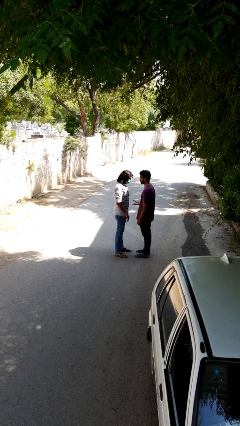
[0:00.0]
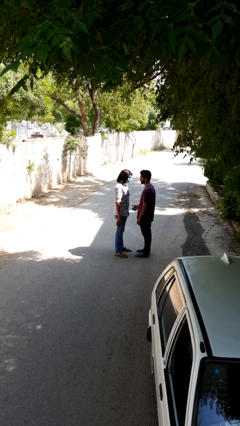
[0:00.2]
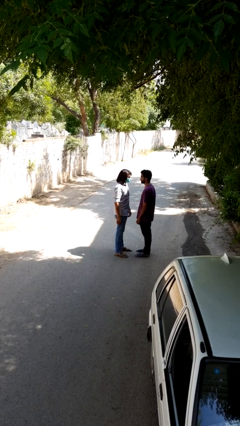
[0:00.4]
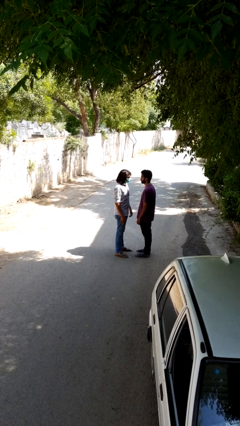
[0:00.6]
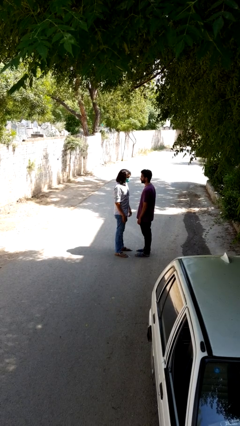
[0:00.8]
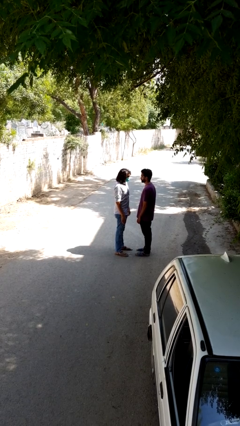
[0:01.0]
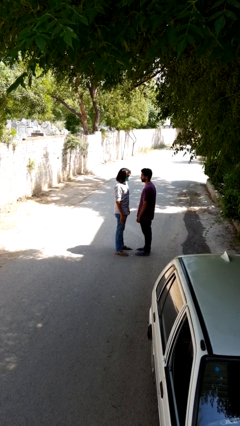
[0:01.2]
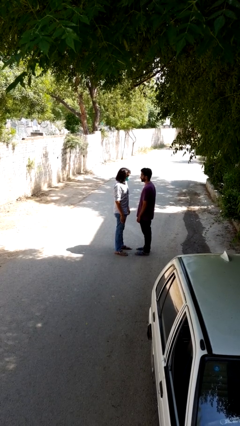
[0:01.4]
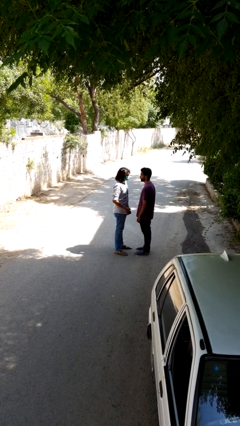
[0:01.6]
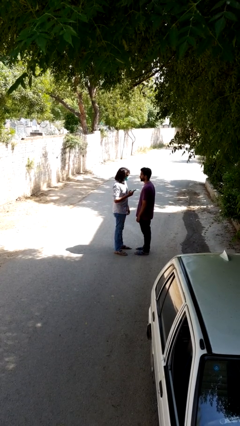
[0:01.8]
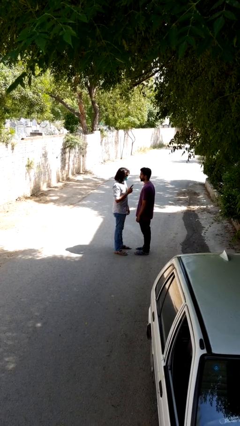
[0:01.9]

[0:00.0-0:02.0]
person highfives hand

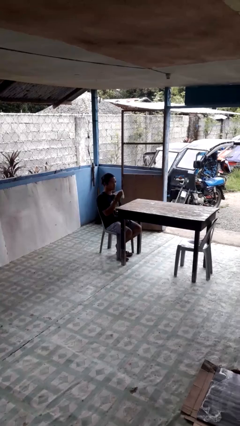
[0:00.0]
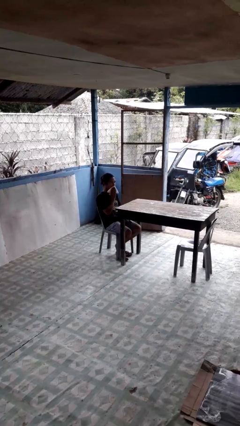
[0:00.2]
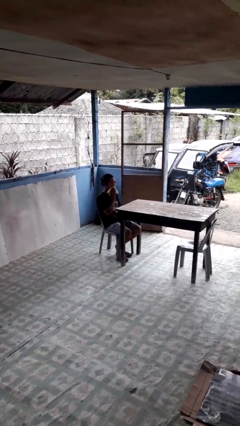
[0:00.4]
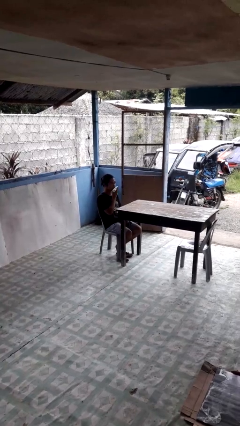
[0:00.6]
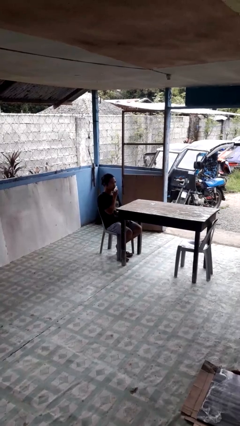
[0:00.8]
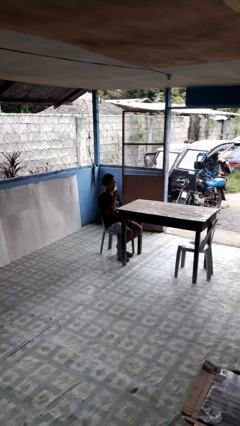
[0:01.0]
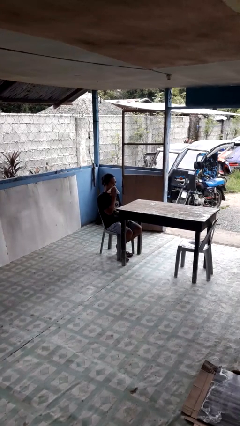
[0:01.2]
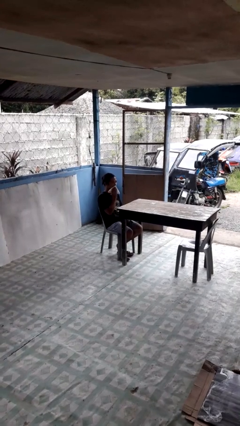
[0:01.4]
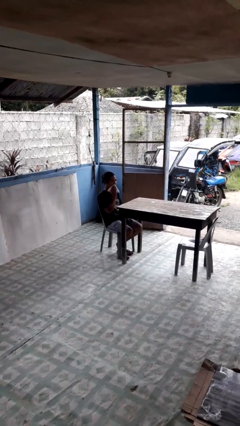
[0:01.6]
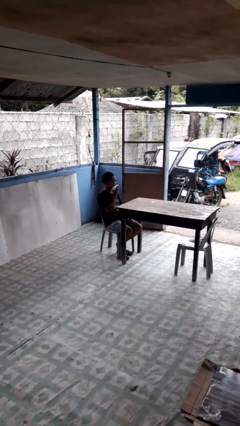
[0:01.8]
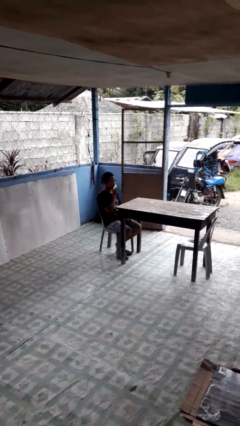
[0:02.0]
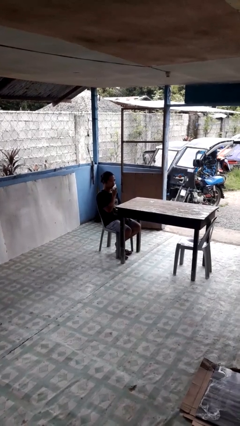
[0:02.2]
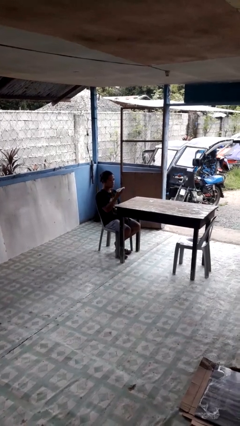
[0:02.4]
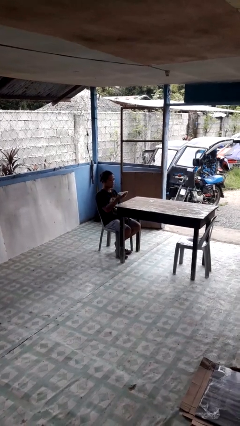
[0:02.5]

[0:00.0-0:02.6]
person wipes mouth with napkin

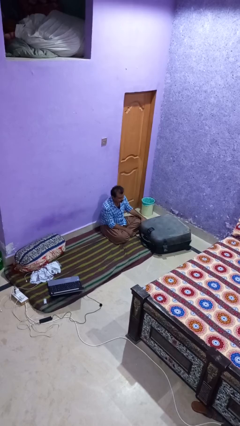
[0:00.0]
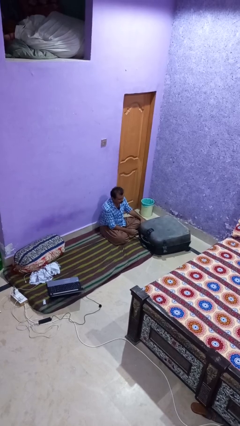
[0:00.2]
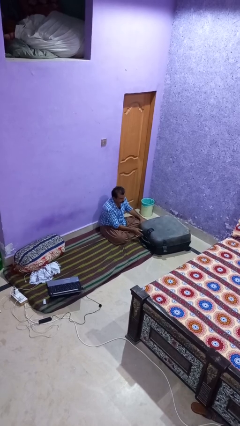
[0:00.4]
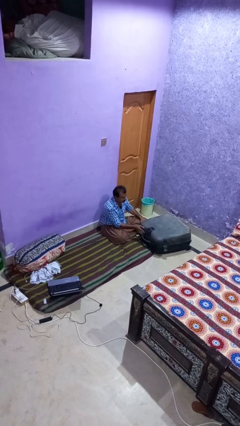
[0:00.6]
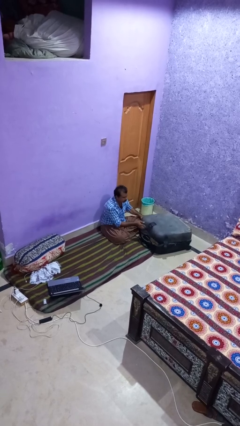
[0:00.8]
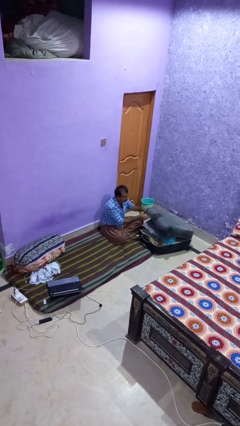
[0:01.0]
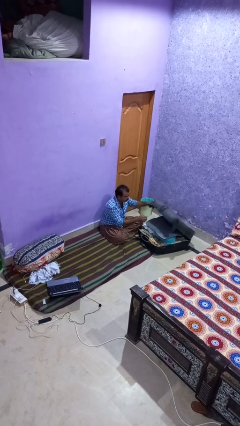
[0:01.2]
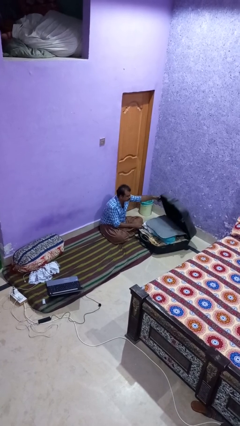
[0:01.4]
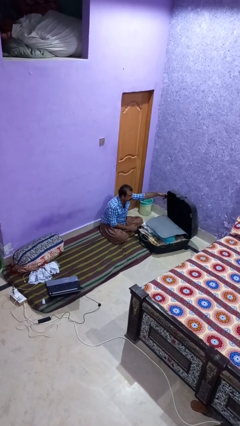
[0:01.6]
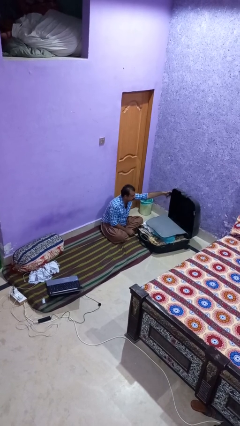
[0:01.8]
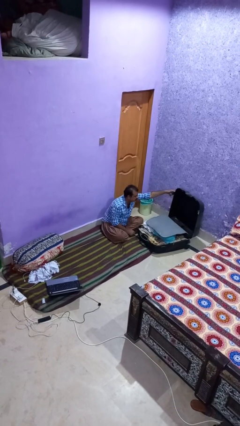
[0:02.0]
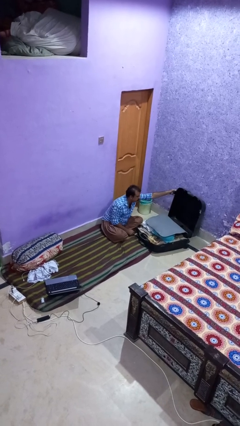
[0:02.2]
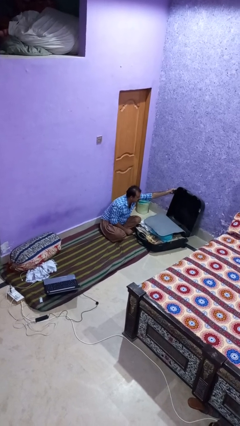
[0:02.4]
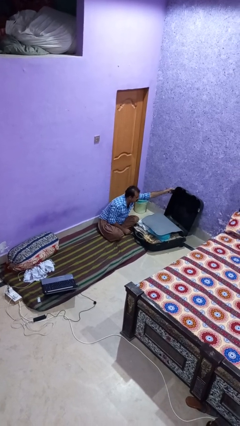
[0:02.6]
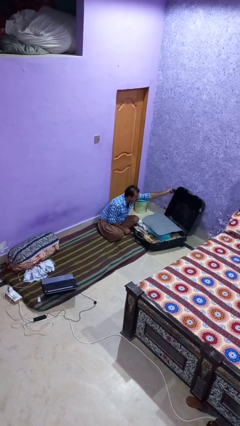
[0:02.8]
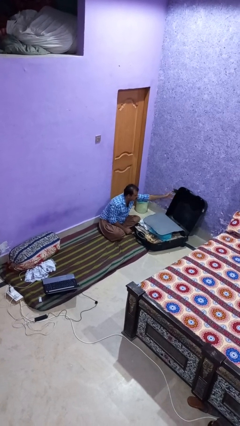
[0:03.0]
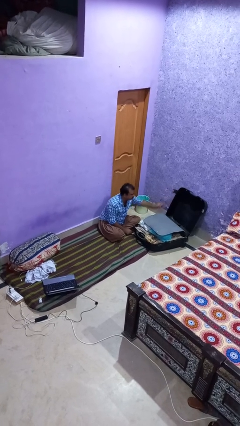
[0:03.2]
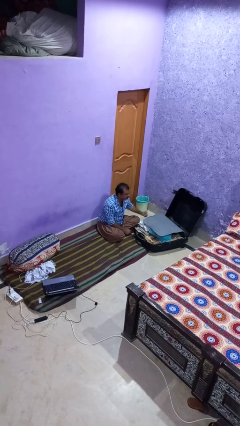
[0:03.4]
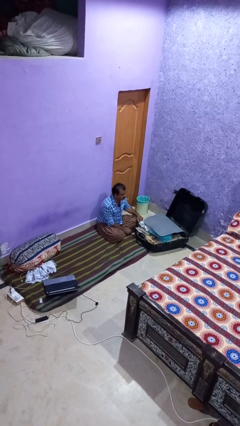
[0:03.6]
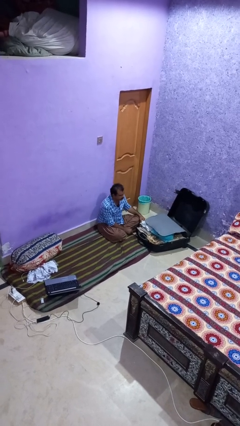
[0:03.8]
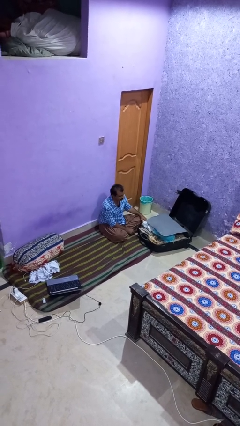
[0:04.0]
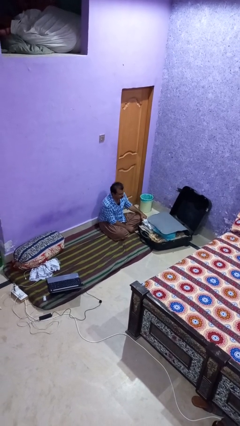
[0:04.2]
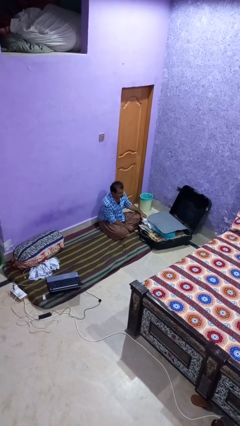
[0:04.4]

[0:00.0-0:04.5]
person opens suitcase

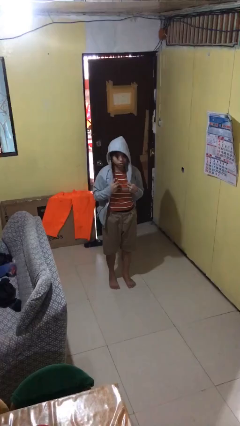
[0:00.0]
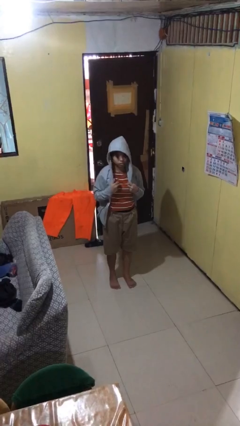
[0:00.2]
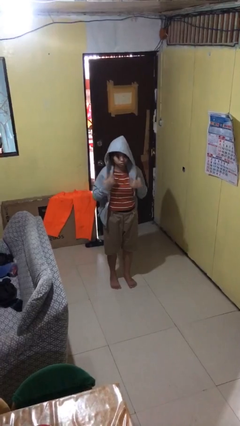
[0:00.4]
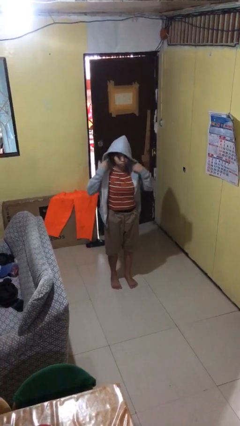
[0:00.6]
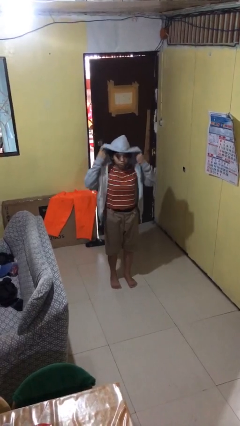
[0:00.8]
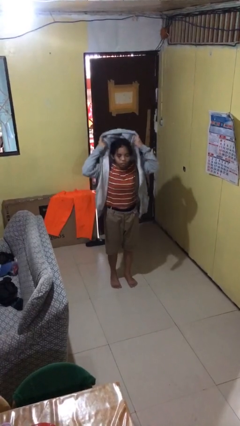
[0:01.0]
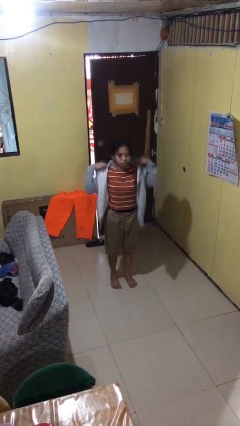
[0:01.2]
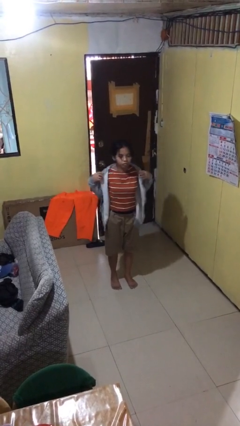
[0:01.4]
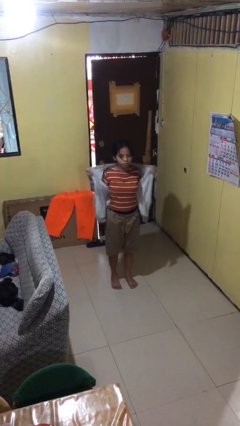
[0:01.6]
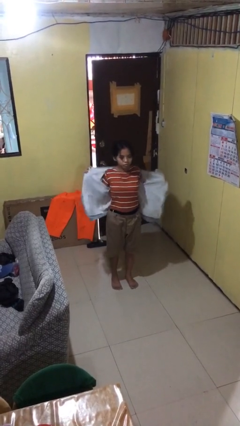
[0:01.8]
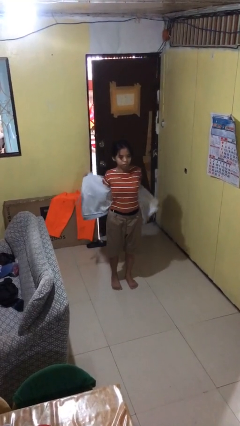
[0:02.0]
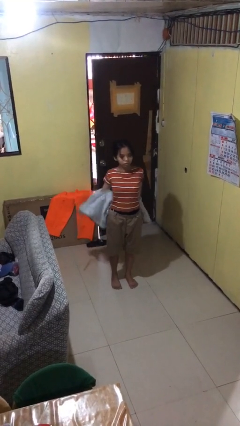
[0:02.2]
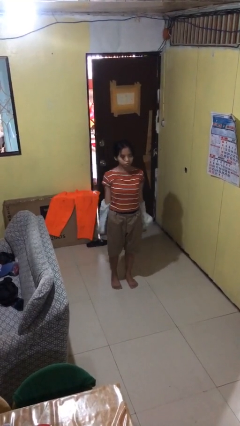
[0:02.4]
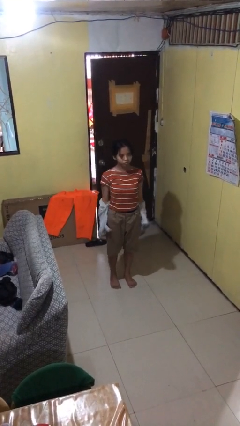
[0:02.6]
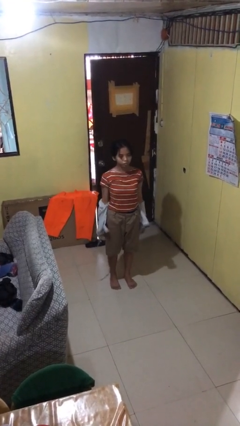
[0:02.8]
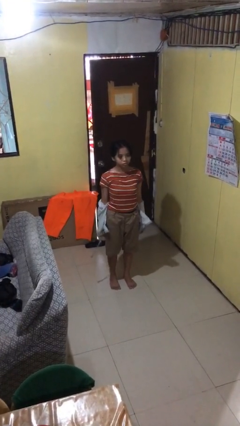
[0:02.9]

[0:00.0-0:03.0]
person takes off hoodie

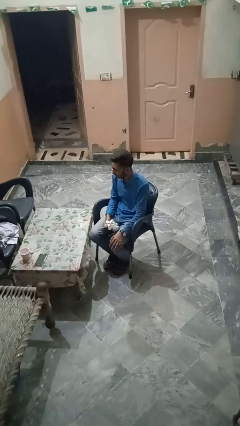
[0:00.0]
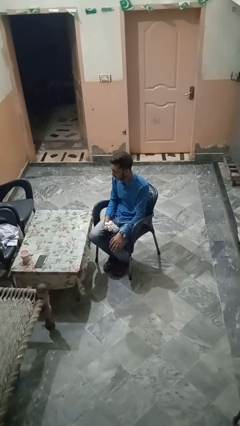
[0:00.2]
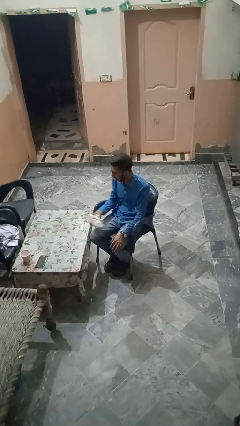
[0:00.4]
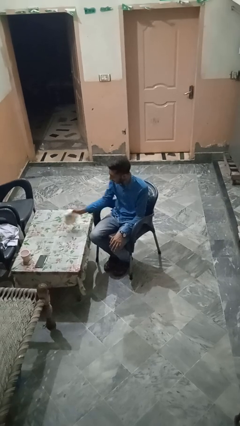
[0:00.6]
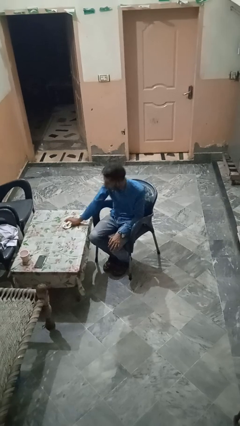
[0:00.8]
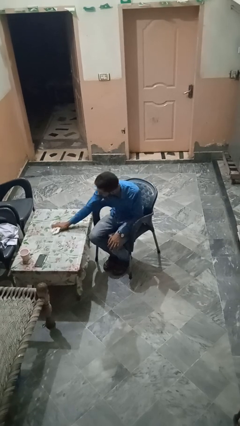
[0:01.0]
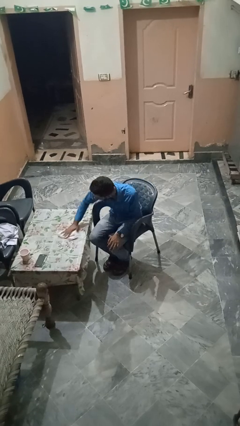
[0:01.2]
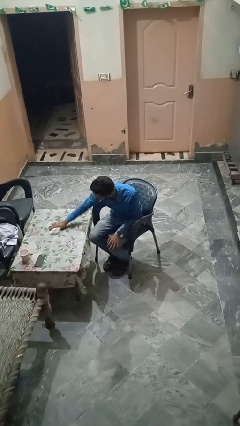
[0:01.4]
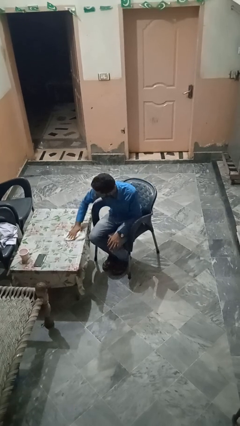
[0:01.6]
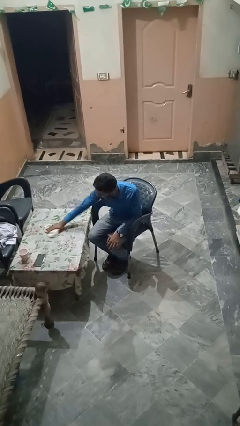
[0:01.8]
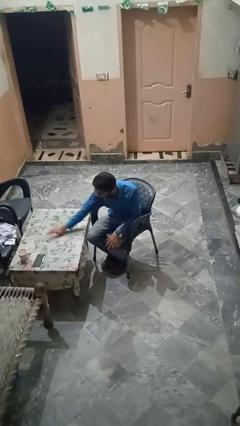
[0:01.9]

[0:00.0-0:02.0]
person cleans table with rag

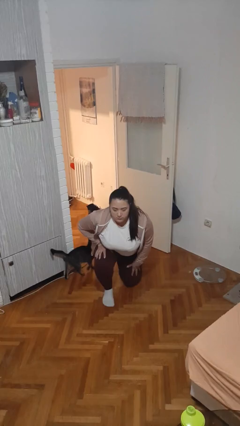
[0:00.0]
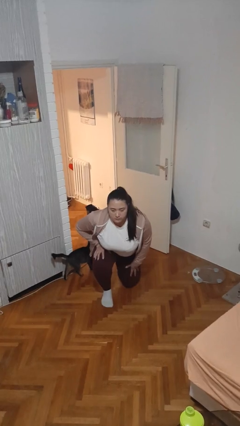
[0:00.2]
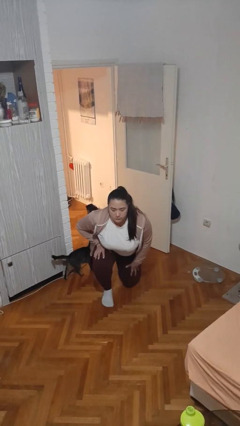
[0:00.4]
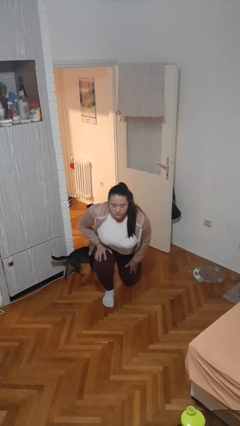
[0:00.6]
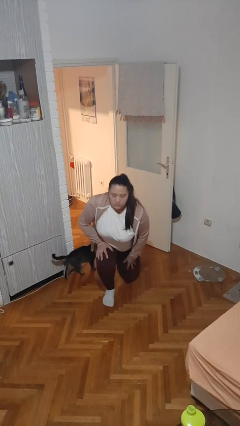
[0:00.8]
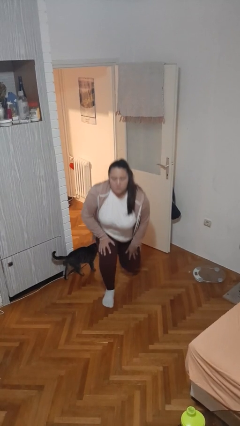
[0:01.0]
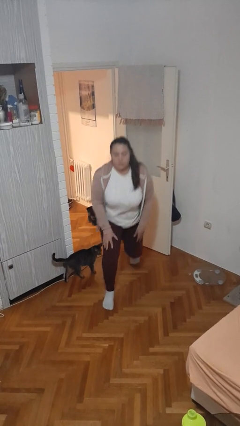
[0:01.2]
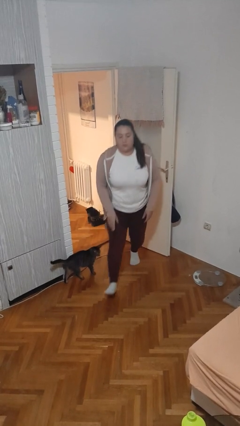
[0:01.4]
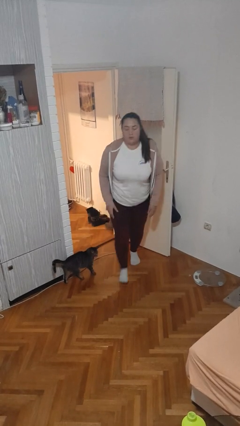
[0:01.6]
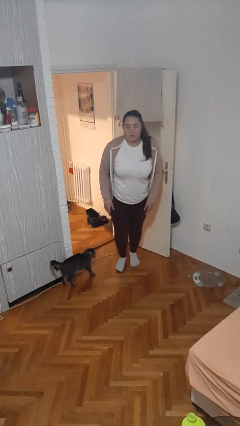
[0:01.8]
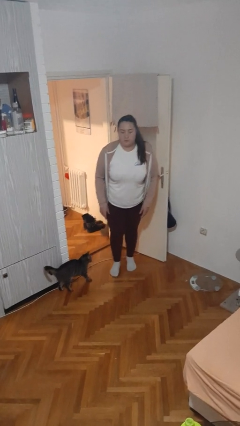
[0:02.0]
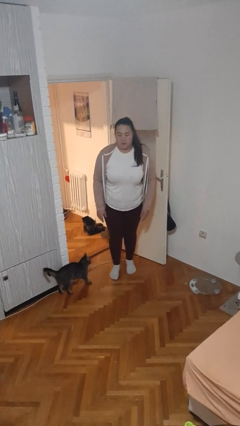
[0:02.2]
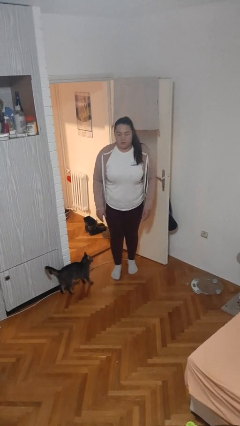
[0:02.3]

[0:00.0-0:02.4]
person stands up from floor

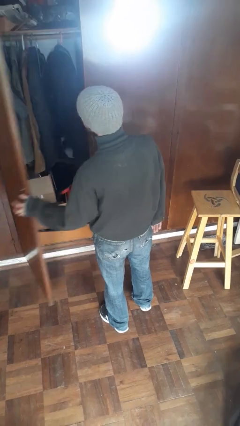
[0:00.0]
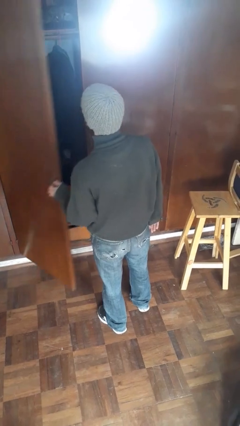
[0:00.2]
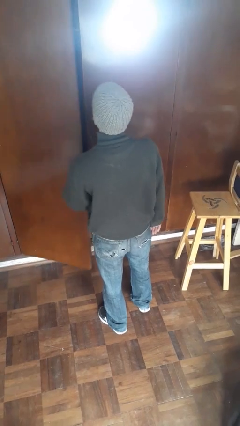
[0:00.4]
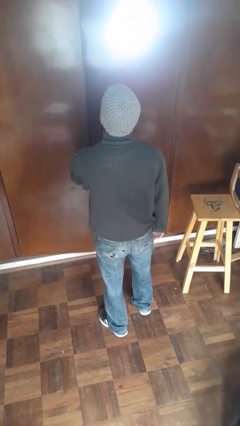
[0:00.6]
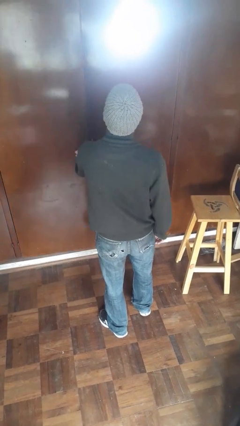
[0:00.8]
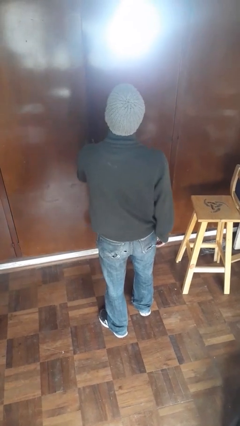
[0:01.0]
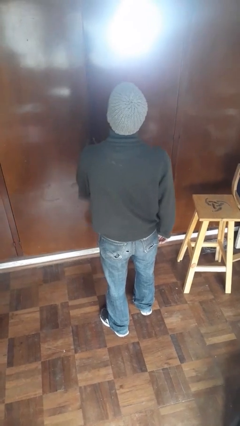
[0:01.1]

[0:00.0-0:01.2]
person closes closet door
